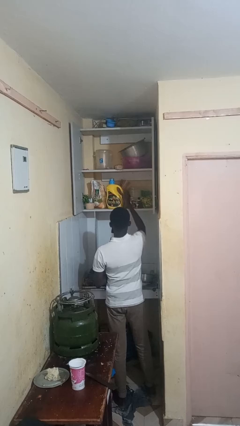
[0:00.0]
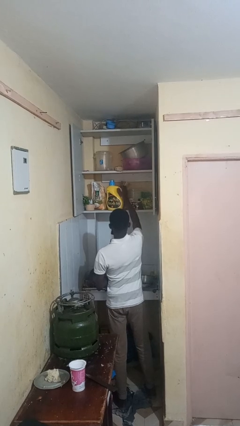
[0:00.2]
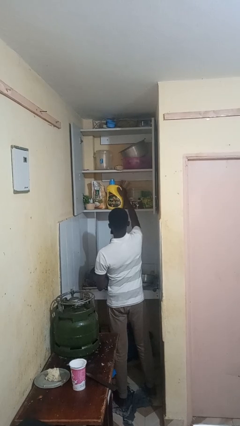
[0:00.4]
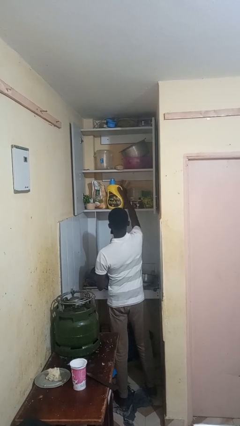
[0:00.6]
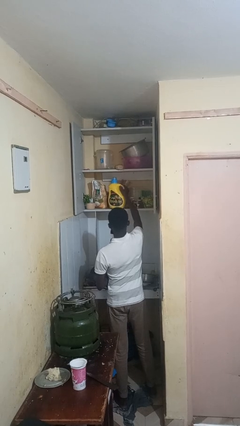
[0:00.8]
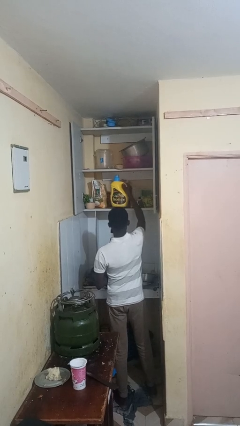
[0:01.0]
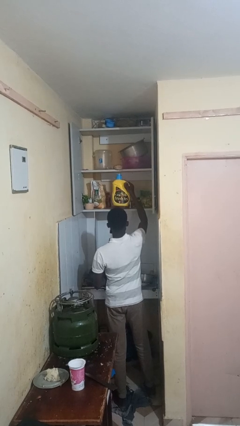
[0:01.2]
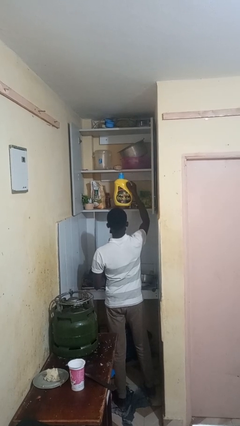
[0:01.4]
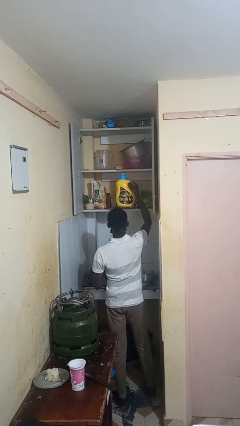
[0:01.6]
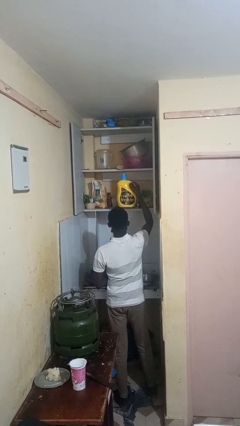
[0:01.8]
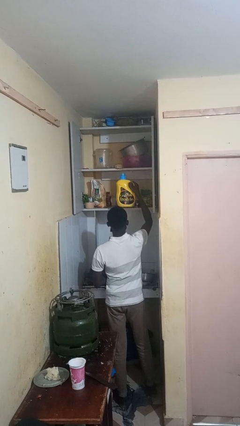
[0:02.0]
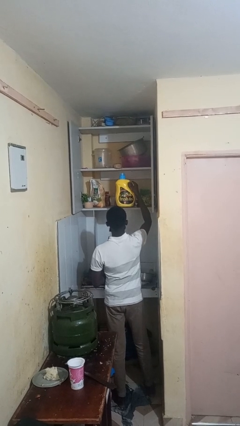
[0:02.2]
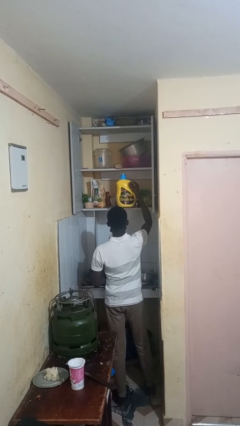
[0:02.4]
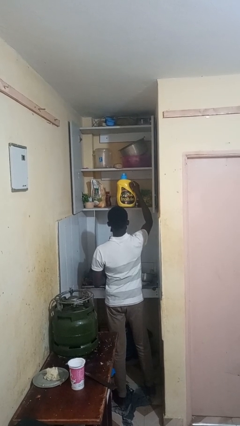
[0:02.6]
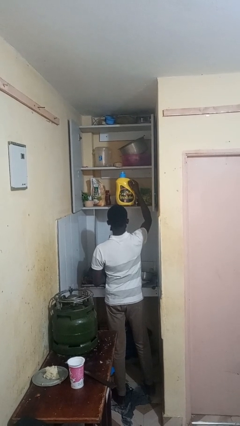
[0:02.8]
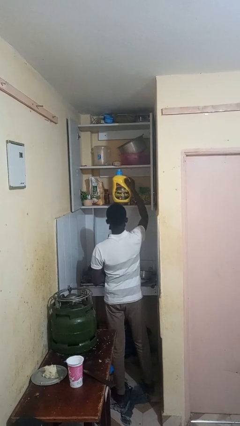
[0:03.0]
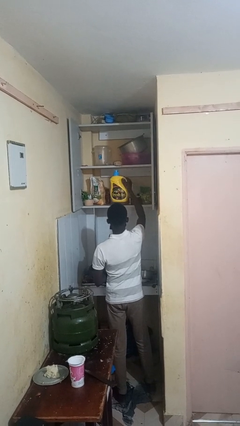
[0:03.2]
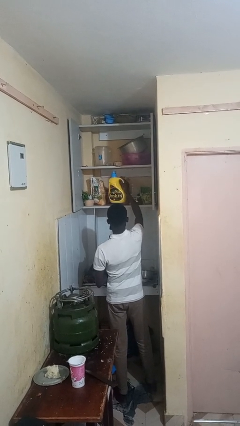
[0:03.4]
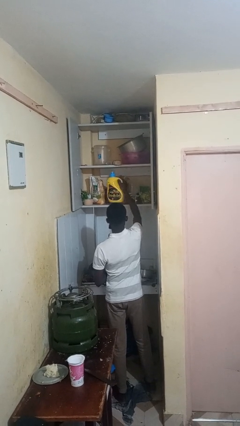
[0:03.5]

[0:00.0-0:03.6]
person picks up object from countertop

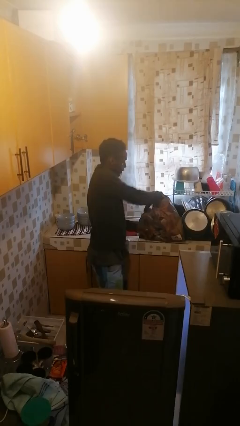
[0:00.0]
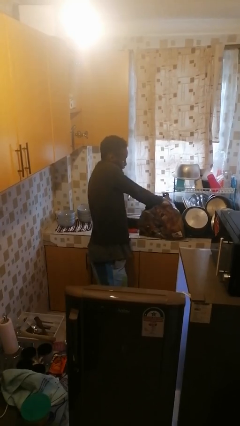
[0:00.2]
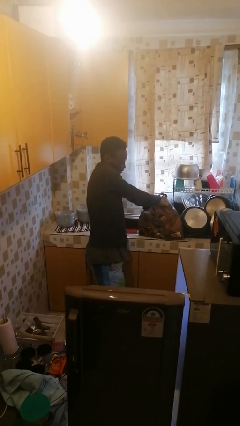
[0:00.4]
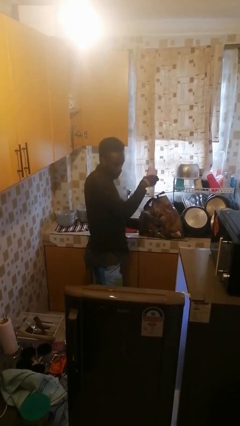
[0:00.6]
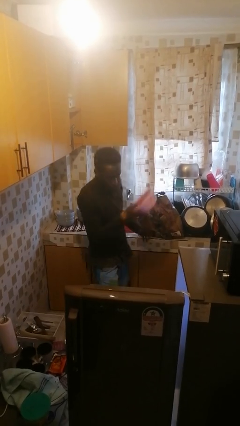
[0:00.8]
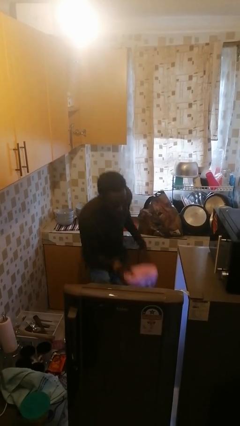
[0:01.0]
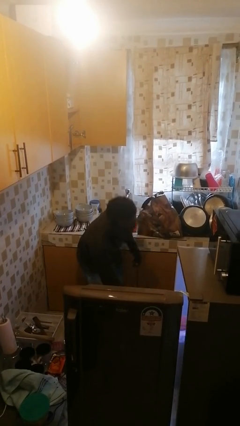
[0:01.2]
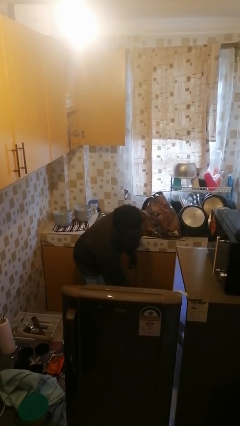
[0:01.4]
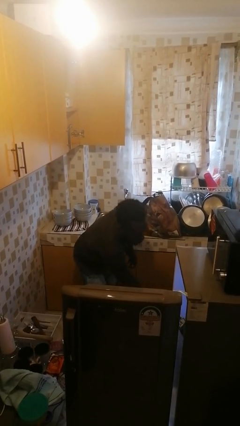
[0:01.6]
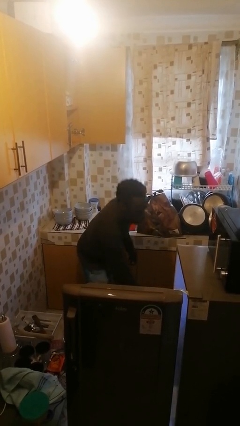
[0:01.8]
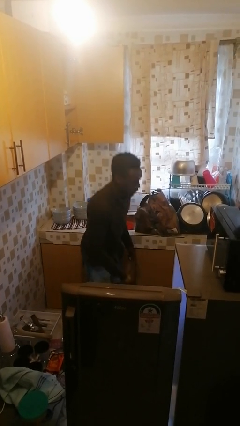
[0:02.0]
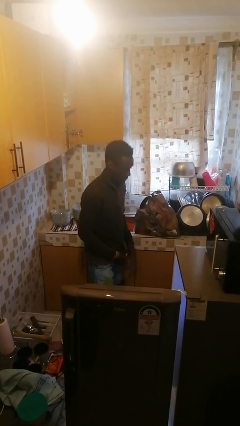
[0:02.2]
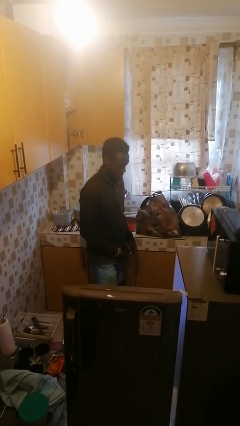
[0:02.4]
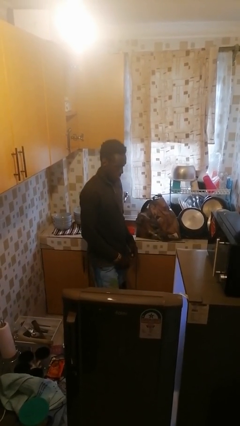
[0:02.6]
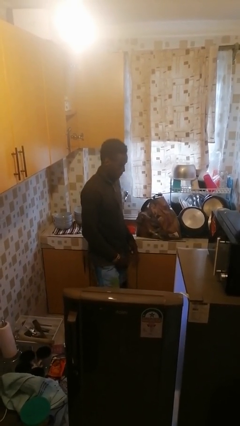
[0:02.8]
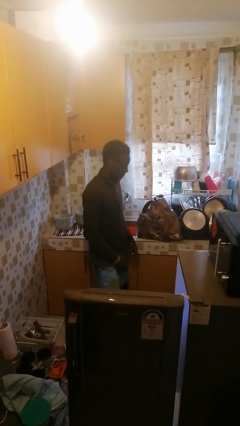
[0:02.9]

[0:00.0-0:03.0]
person loads groceries into refrigerator

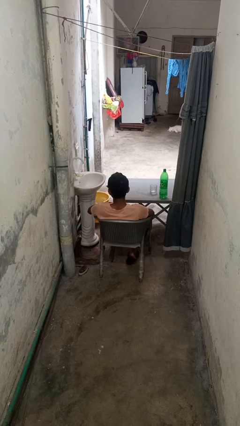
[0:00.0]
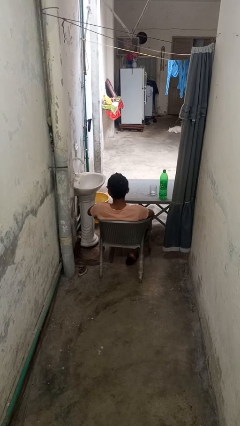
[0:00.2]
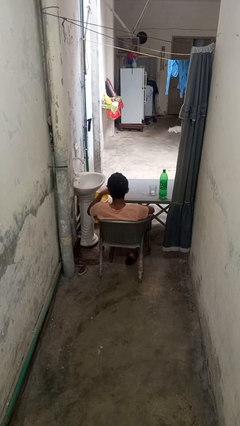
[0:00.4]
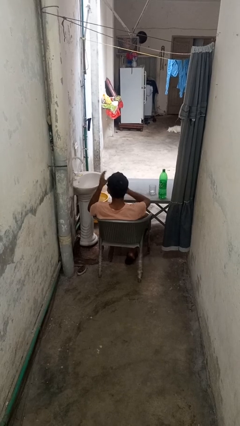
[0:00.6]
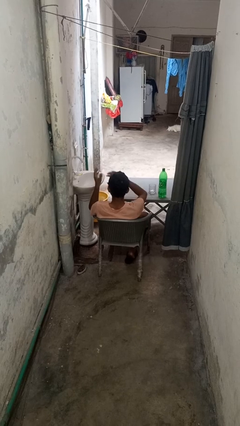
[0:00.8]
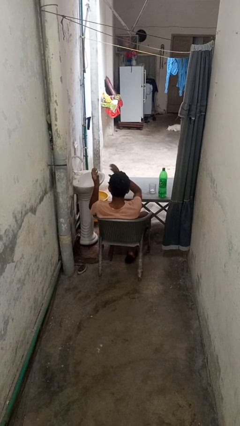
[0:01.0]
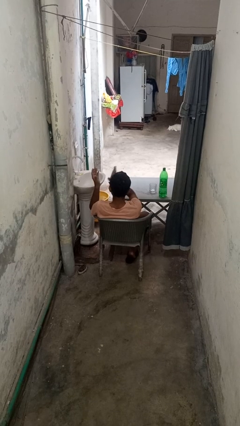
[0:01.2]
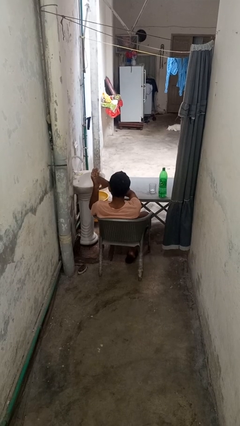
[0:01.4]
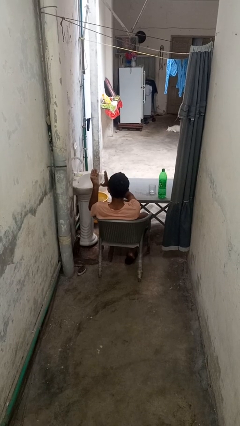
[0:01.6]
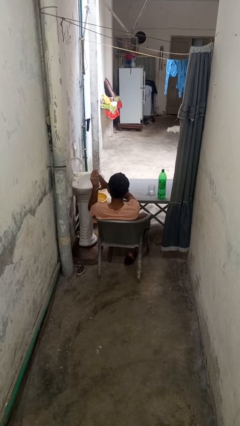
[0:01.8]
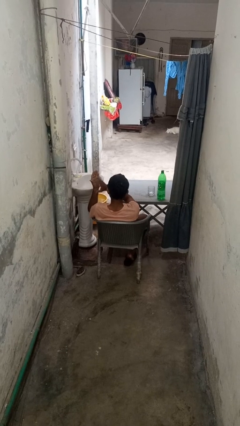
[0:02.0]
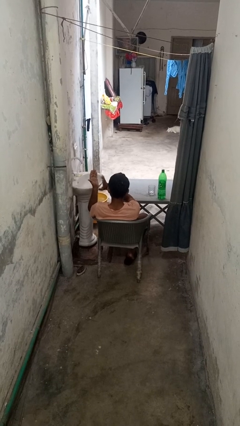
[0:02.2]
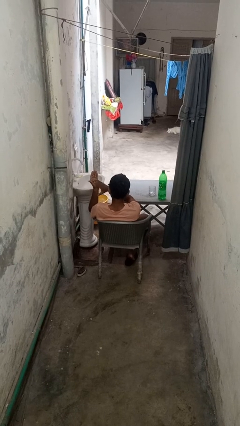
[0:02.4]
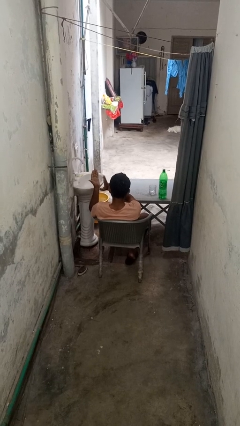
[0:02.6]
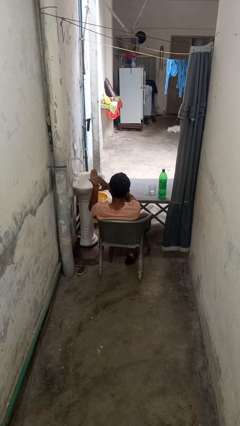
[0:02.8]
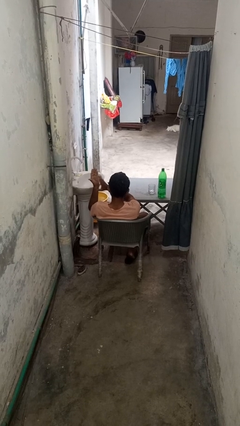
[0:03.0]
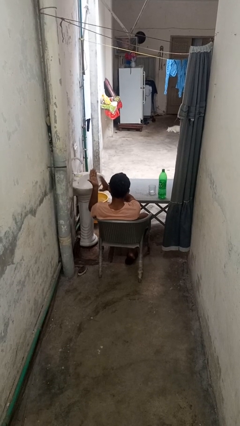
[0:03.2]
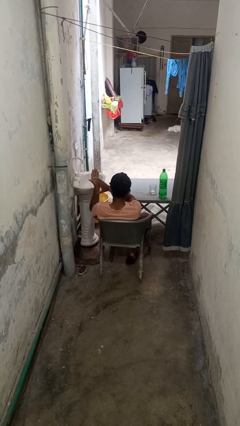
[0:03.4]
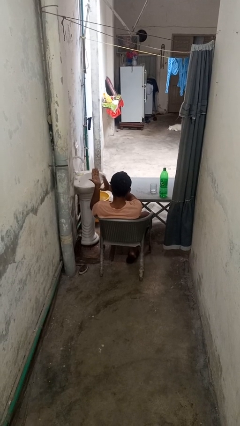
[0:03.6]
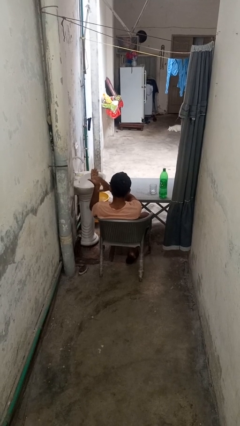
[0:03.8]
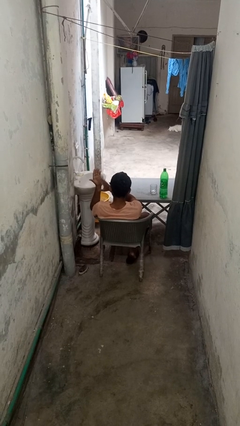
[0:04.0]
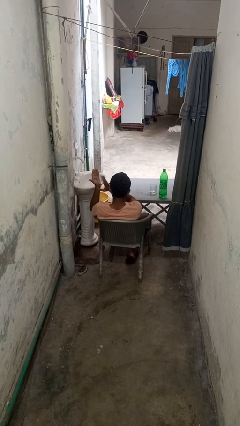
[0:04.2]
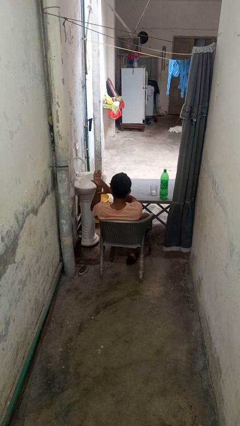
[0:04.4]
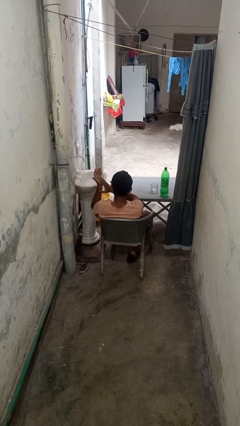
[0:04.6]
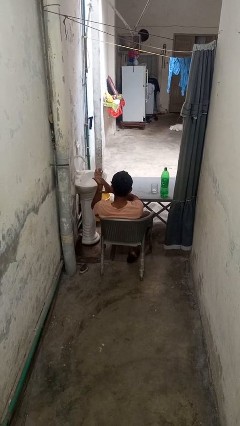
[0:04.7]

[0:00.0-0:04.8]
person claps hands

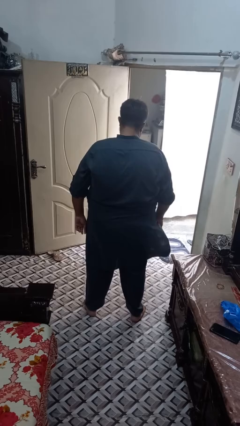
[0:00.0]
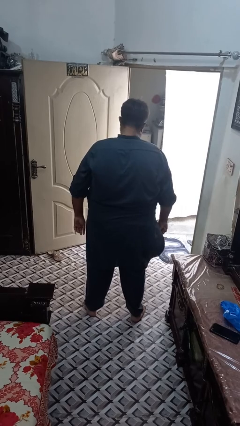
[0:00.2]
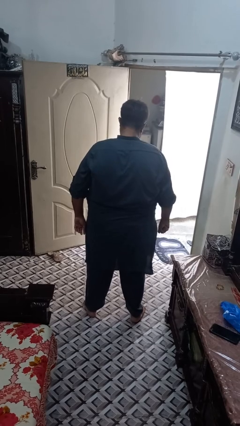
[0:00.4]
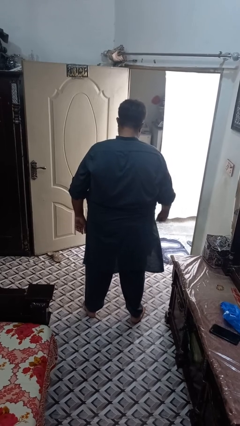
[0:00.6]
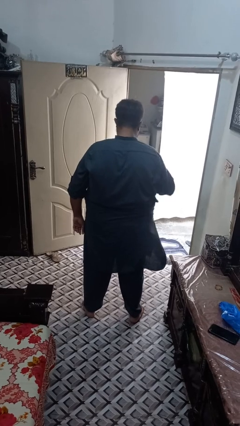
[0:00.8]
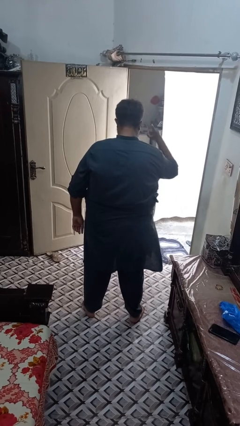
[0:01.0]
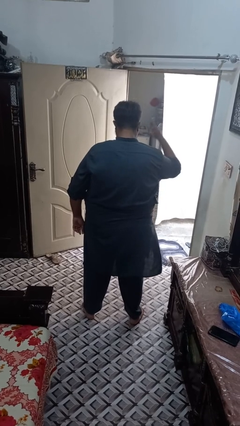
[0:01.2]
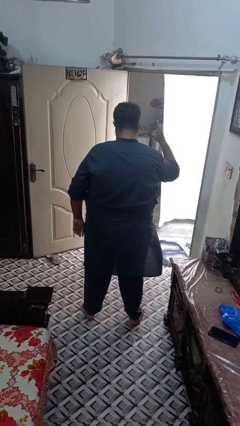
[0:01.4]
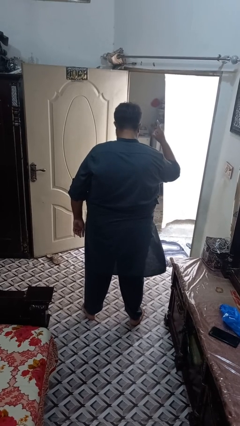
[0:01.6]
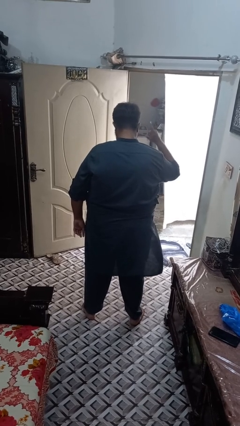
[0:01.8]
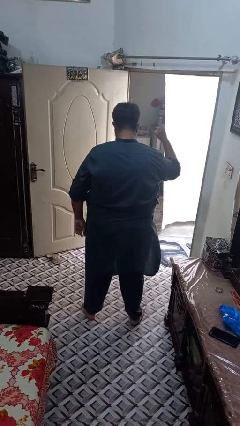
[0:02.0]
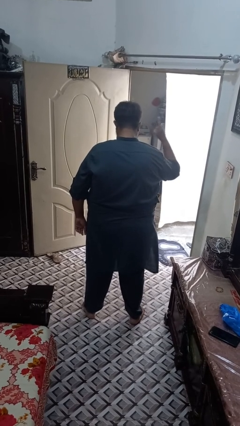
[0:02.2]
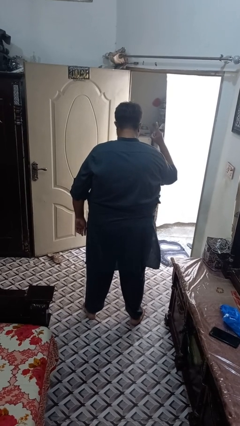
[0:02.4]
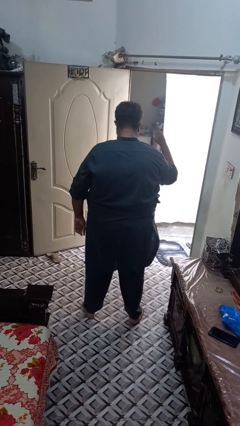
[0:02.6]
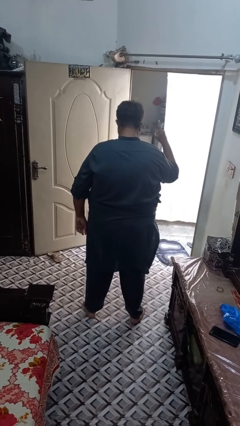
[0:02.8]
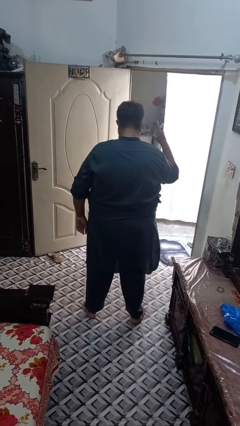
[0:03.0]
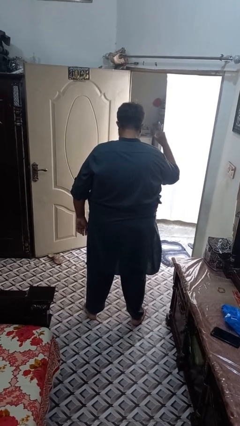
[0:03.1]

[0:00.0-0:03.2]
person gestures number one

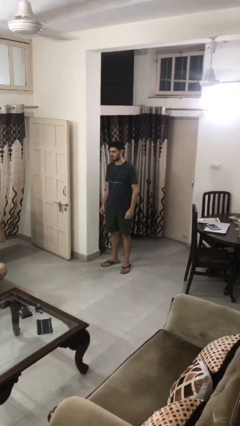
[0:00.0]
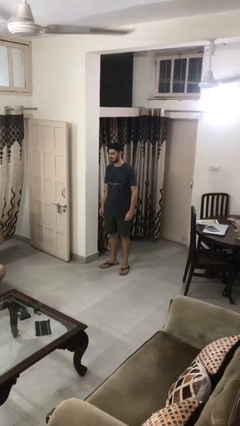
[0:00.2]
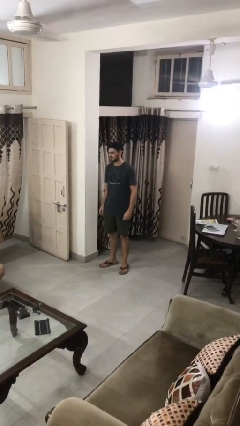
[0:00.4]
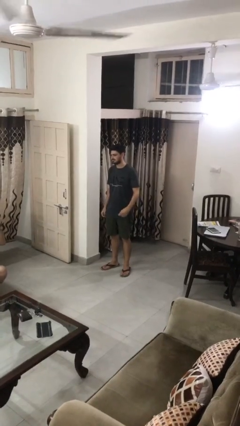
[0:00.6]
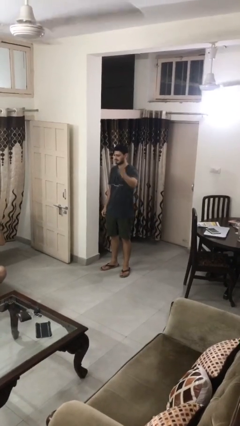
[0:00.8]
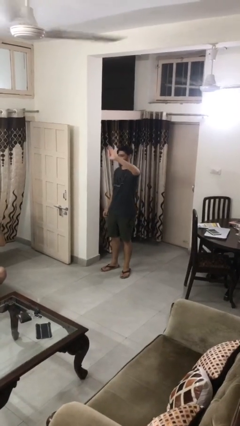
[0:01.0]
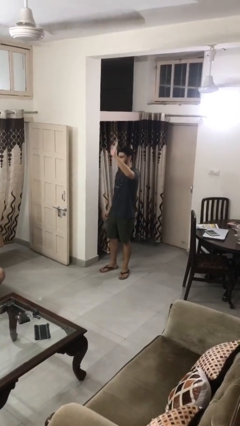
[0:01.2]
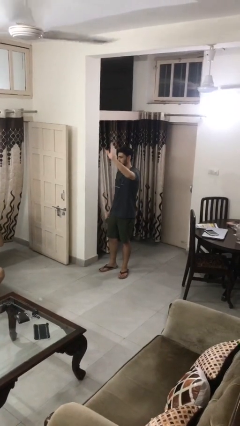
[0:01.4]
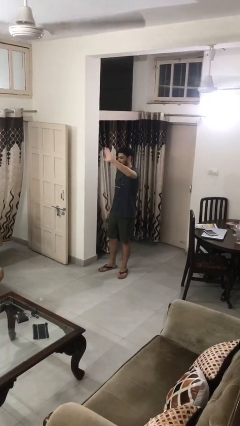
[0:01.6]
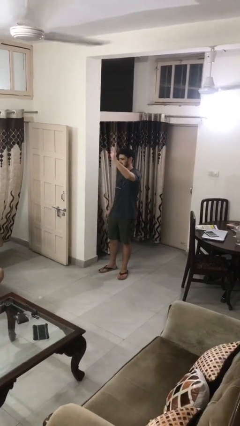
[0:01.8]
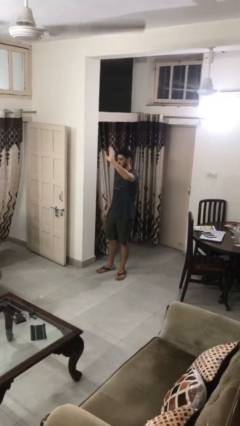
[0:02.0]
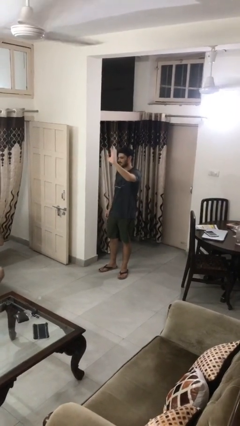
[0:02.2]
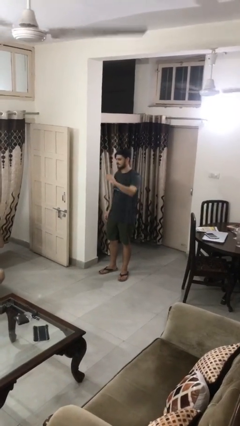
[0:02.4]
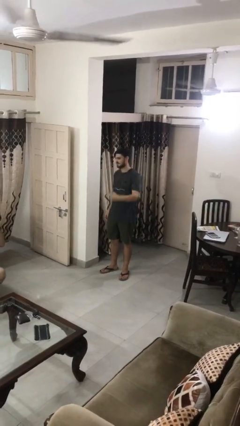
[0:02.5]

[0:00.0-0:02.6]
person waves at person

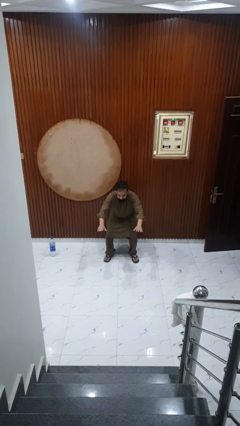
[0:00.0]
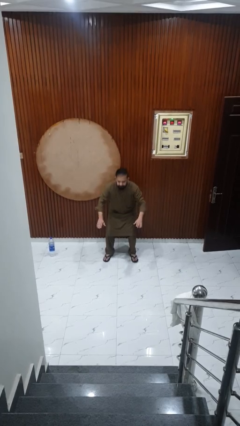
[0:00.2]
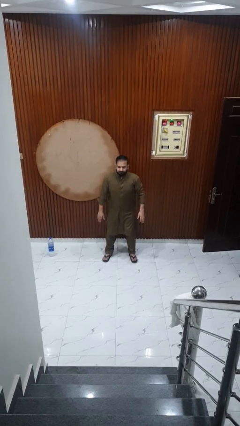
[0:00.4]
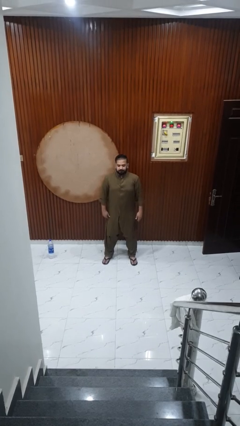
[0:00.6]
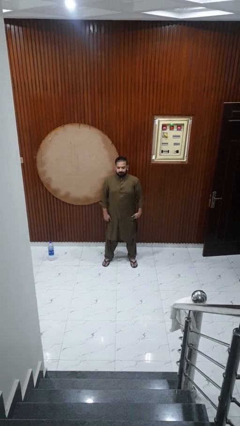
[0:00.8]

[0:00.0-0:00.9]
person stands up
